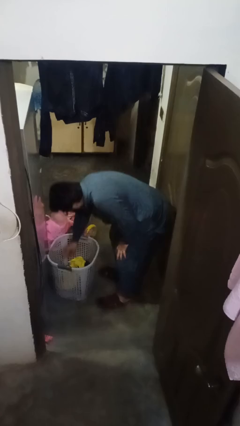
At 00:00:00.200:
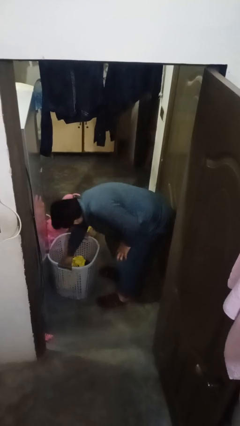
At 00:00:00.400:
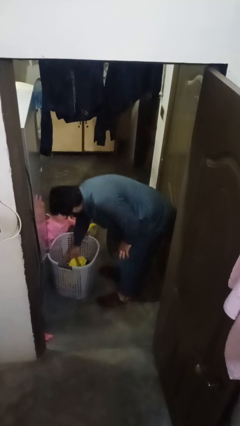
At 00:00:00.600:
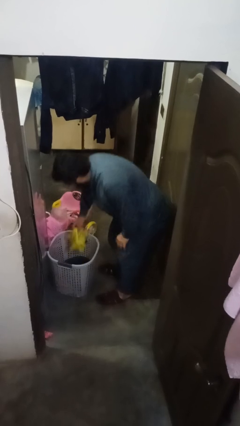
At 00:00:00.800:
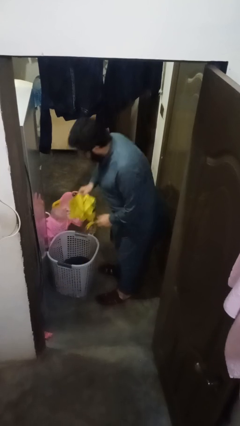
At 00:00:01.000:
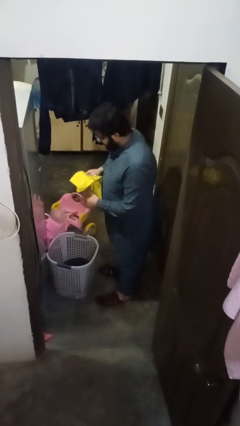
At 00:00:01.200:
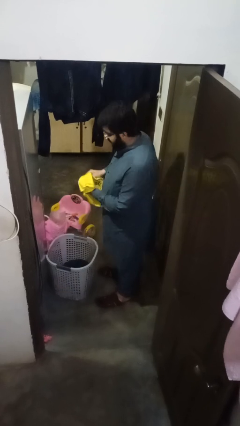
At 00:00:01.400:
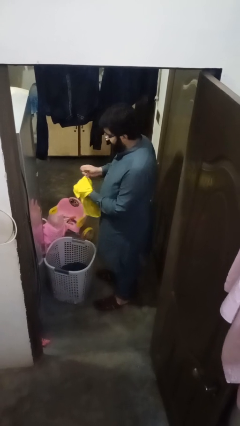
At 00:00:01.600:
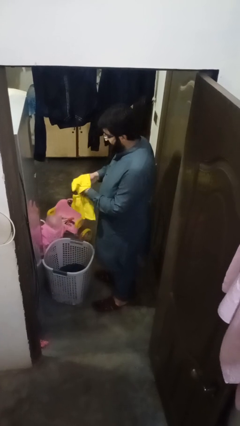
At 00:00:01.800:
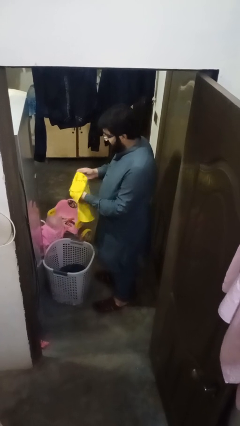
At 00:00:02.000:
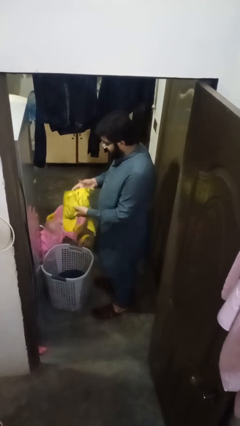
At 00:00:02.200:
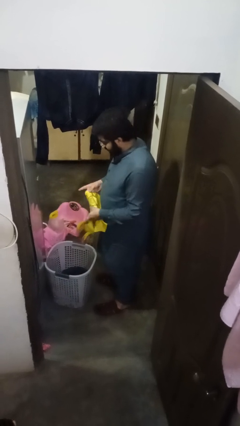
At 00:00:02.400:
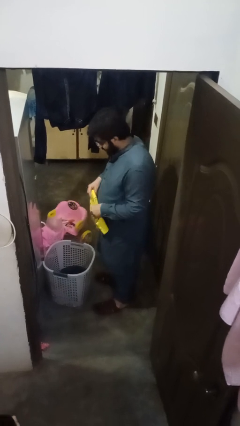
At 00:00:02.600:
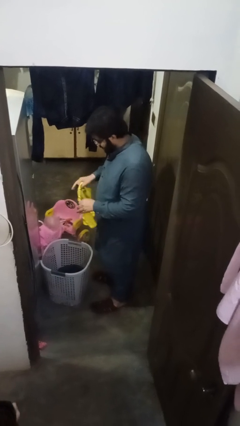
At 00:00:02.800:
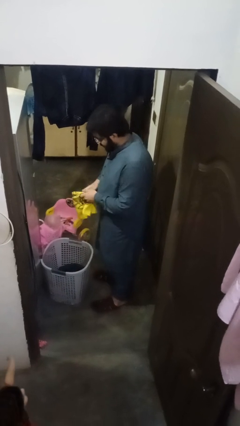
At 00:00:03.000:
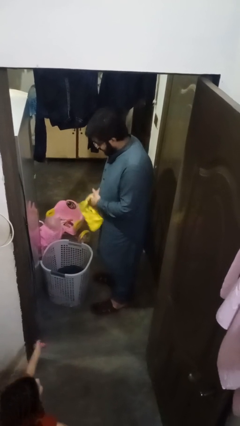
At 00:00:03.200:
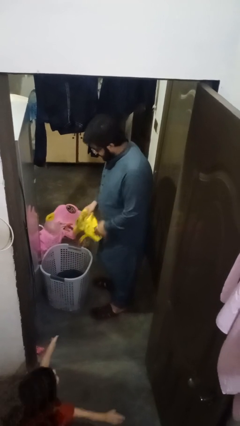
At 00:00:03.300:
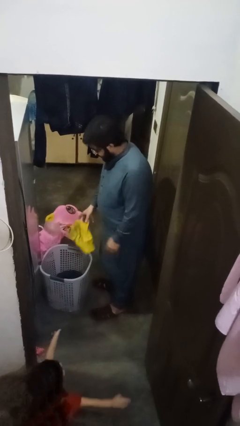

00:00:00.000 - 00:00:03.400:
person folds shirt

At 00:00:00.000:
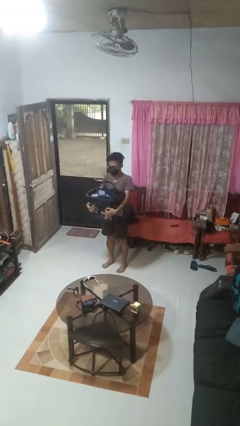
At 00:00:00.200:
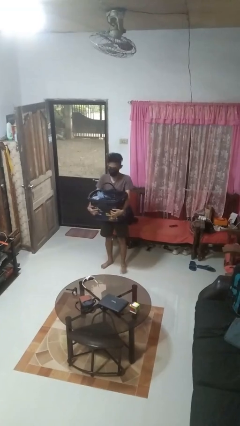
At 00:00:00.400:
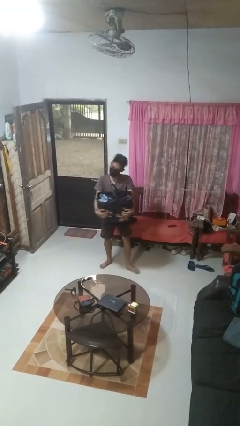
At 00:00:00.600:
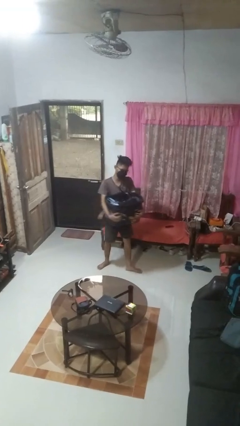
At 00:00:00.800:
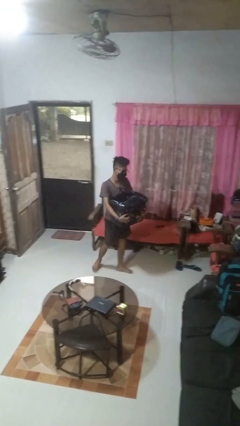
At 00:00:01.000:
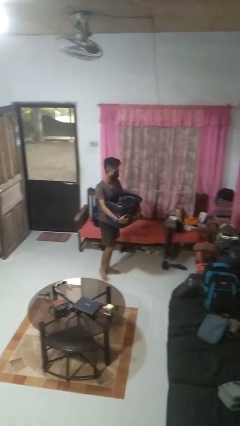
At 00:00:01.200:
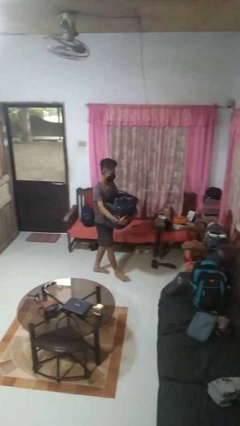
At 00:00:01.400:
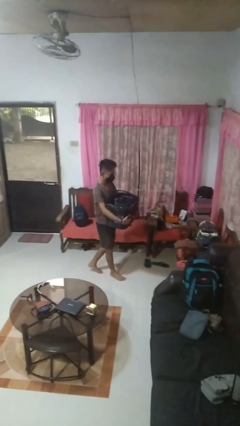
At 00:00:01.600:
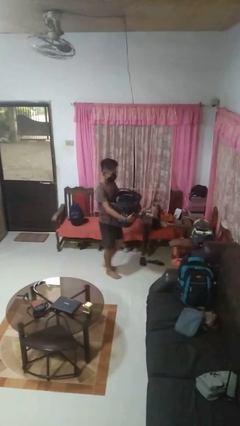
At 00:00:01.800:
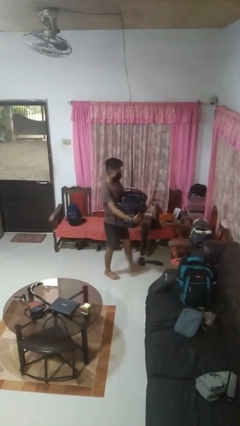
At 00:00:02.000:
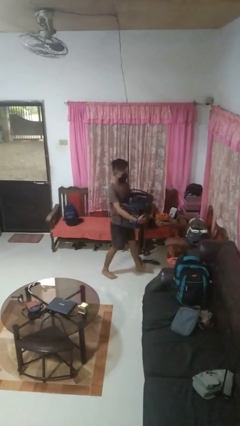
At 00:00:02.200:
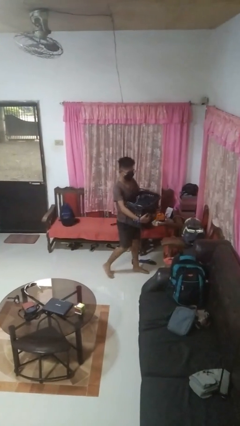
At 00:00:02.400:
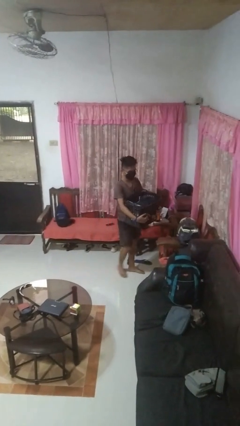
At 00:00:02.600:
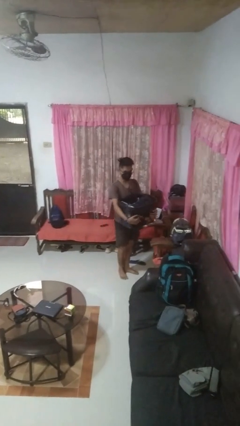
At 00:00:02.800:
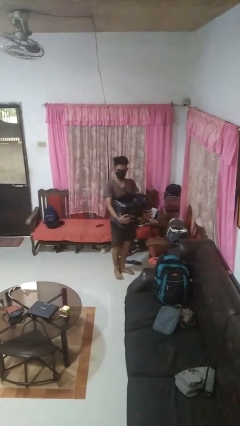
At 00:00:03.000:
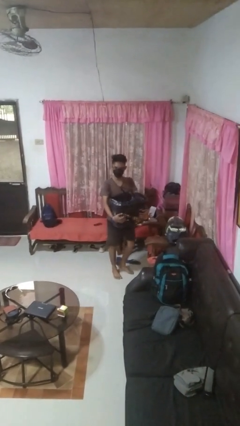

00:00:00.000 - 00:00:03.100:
person carries laundry basket

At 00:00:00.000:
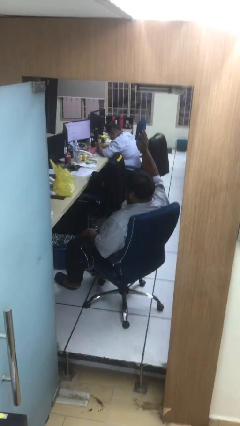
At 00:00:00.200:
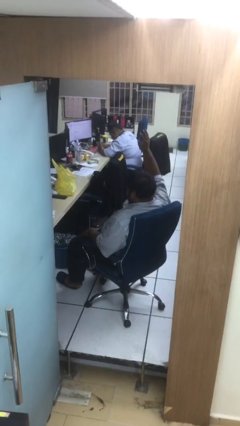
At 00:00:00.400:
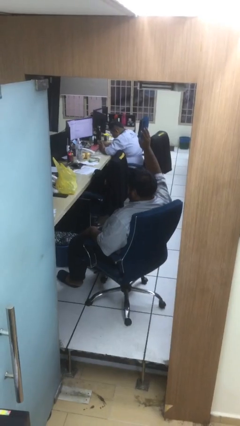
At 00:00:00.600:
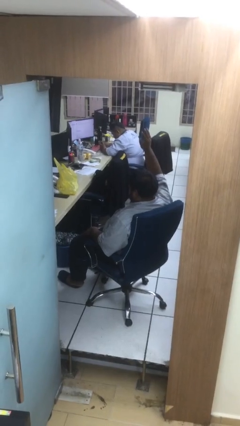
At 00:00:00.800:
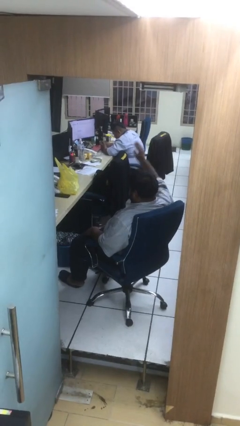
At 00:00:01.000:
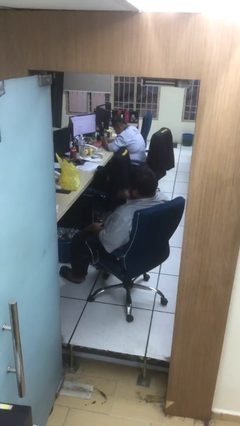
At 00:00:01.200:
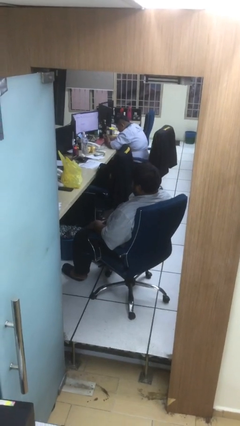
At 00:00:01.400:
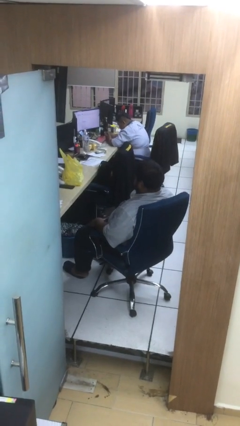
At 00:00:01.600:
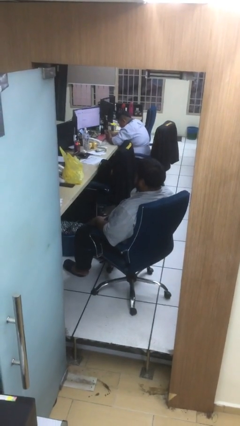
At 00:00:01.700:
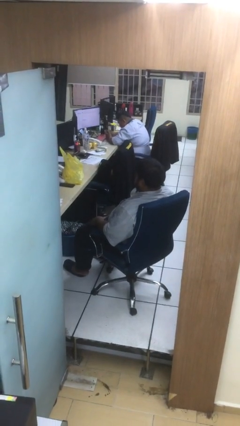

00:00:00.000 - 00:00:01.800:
person gestures lower hand

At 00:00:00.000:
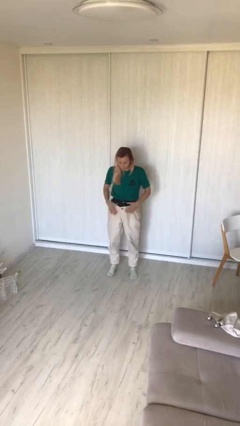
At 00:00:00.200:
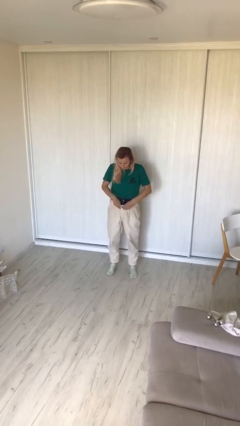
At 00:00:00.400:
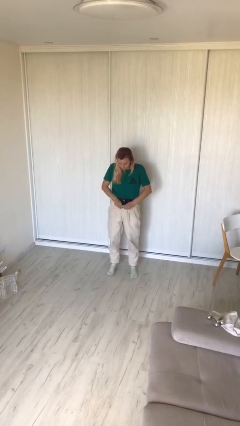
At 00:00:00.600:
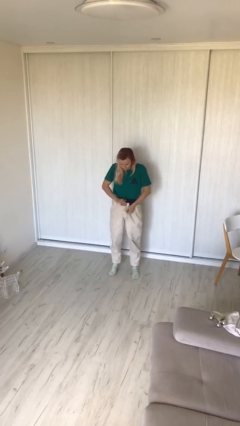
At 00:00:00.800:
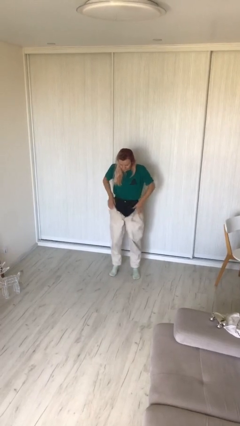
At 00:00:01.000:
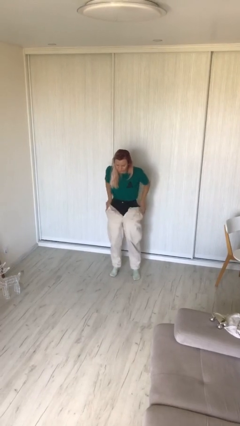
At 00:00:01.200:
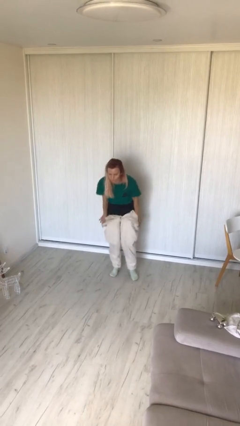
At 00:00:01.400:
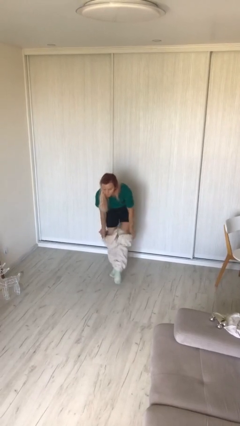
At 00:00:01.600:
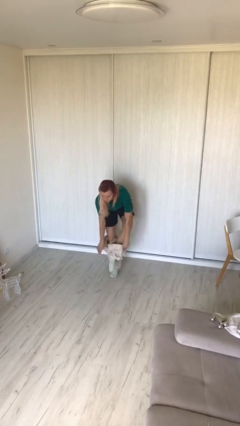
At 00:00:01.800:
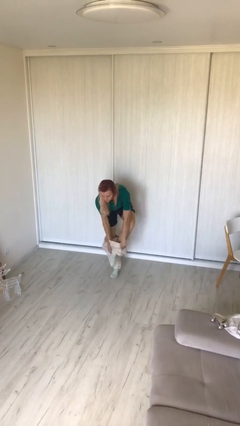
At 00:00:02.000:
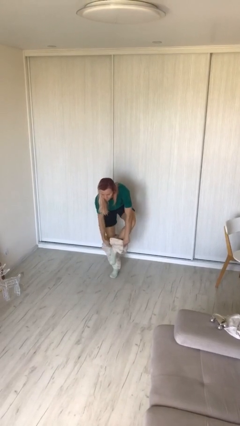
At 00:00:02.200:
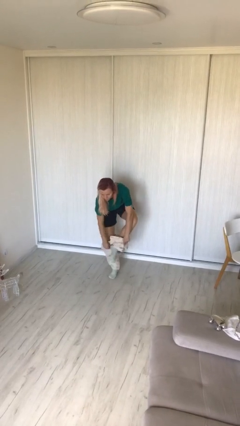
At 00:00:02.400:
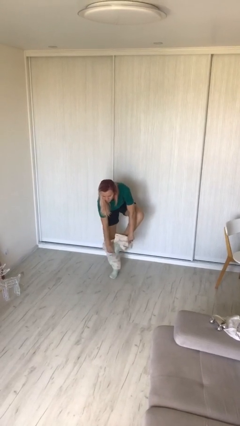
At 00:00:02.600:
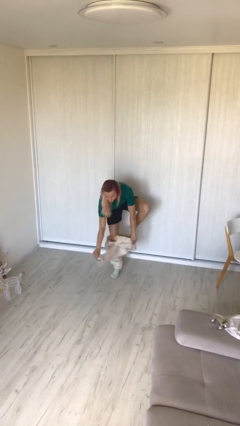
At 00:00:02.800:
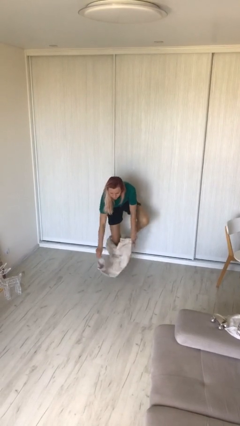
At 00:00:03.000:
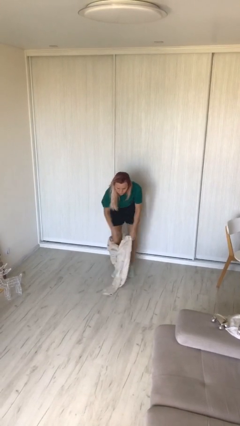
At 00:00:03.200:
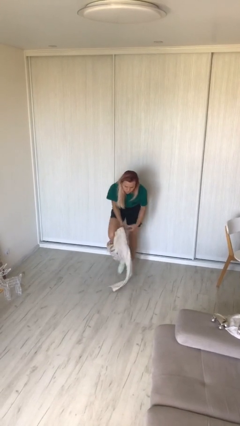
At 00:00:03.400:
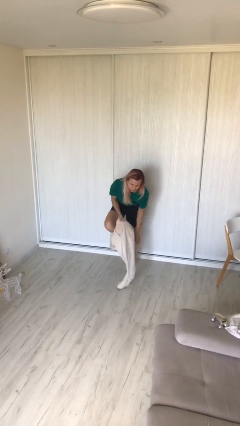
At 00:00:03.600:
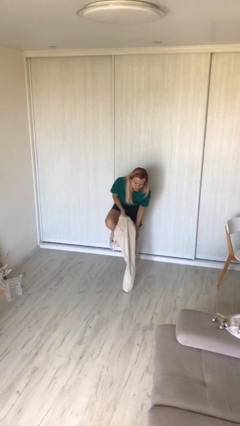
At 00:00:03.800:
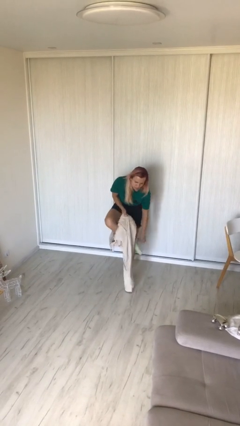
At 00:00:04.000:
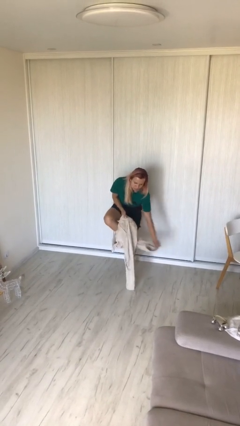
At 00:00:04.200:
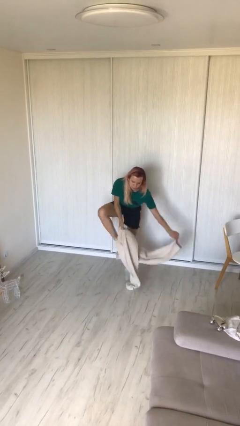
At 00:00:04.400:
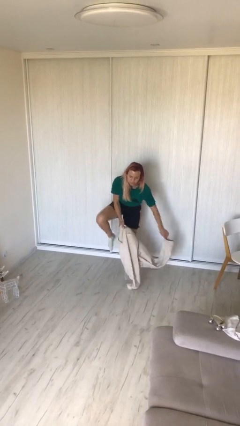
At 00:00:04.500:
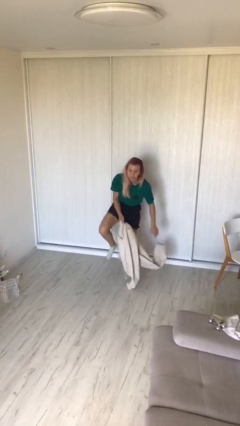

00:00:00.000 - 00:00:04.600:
person takes off pants

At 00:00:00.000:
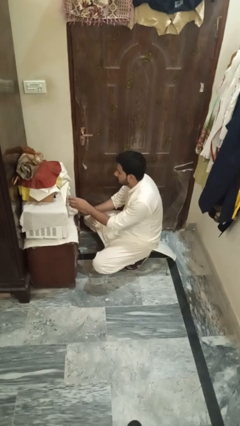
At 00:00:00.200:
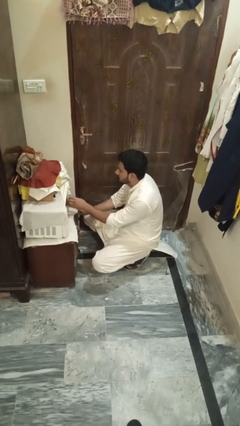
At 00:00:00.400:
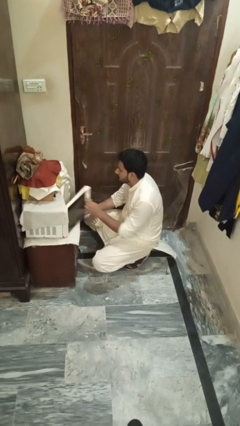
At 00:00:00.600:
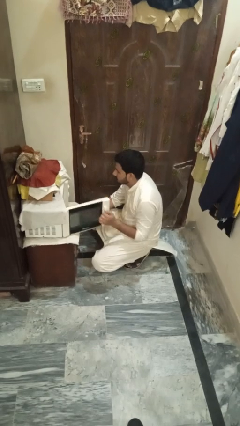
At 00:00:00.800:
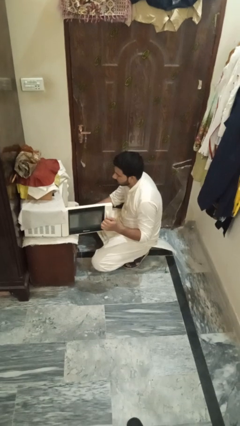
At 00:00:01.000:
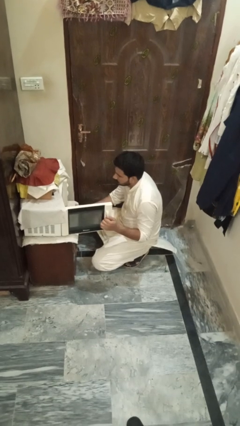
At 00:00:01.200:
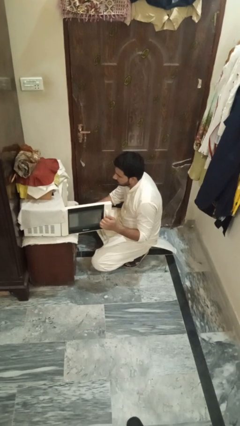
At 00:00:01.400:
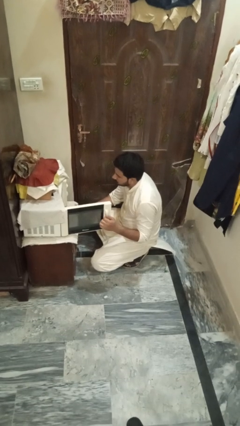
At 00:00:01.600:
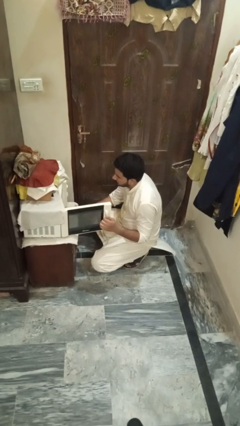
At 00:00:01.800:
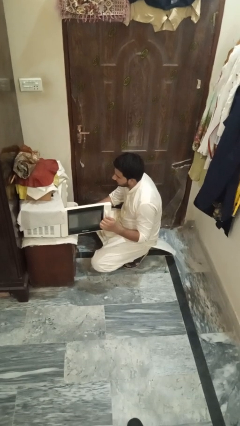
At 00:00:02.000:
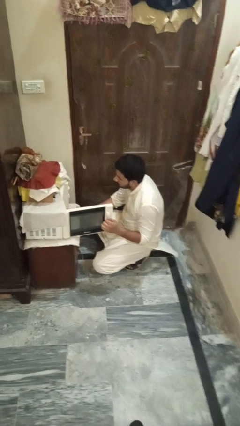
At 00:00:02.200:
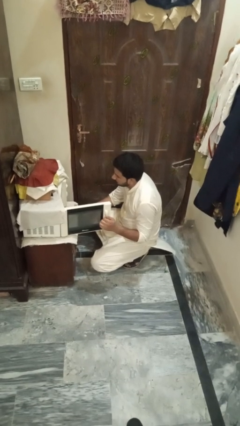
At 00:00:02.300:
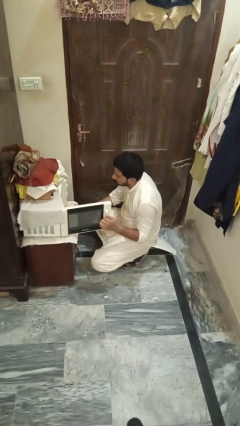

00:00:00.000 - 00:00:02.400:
person opens microwave

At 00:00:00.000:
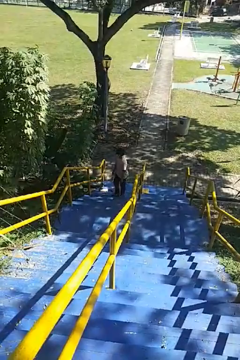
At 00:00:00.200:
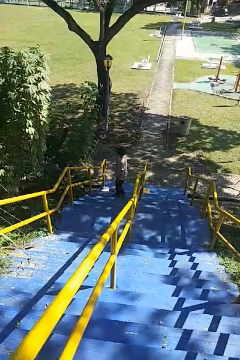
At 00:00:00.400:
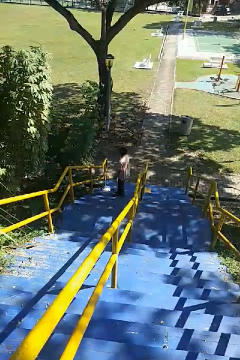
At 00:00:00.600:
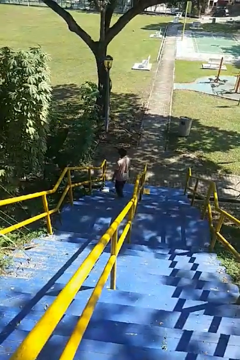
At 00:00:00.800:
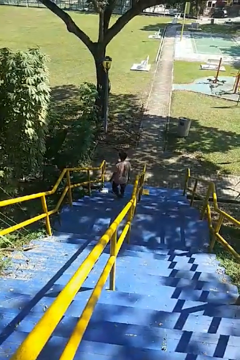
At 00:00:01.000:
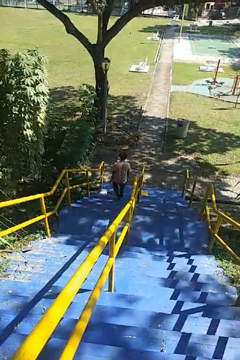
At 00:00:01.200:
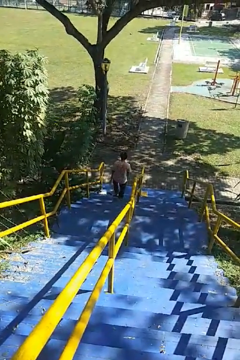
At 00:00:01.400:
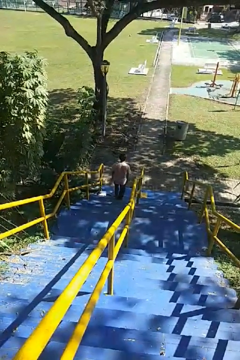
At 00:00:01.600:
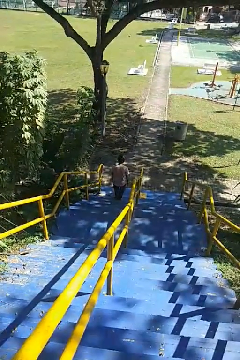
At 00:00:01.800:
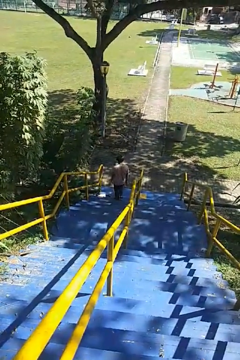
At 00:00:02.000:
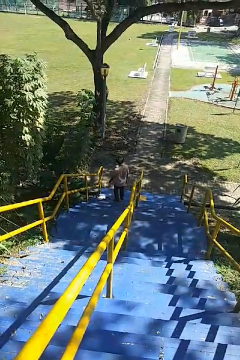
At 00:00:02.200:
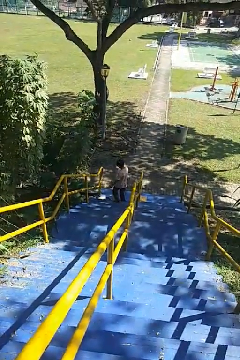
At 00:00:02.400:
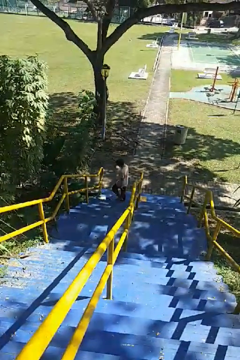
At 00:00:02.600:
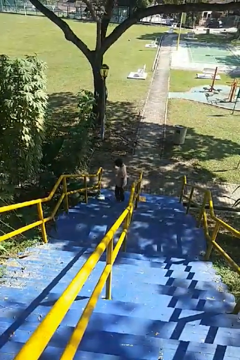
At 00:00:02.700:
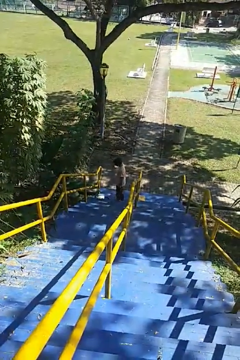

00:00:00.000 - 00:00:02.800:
person climbs down stairs
